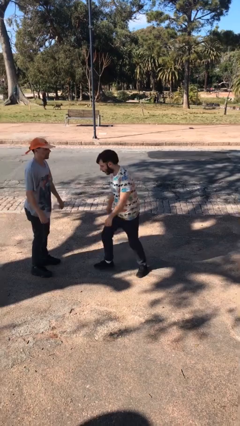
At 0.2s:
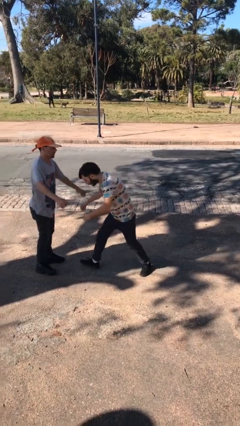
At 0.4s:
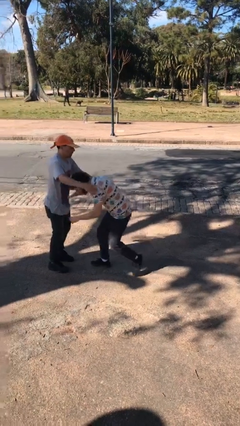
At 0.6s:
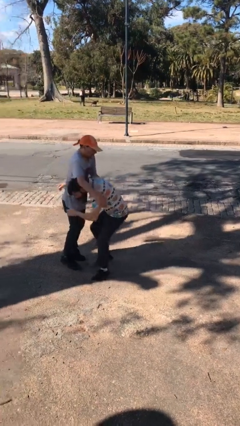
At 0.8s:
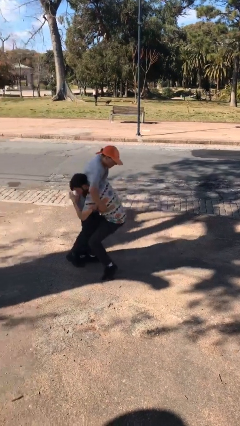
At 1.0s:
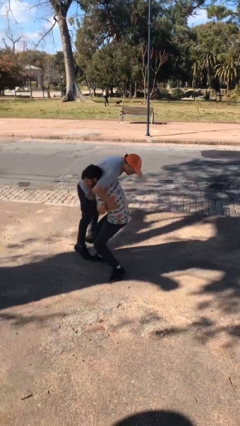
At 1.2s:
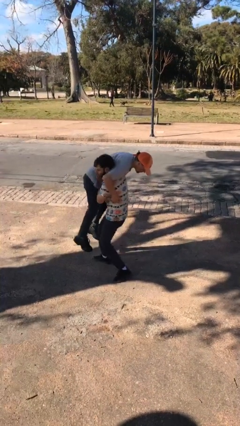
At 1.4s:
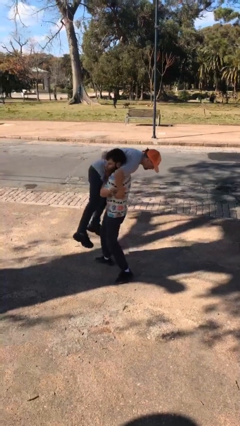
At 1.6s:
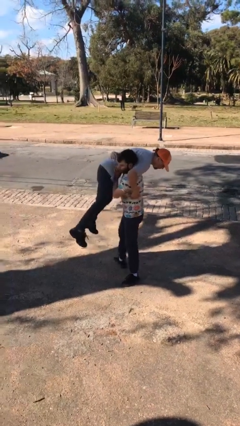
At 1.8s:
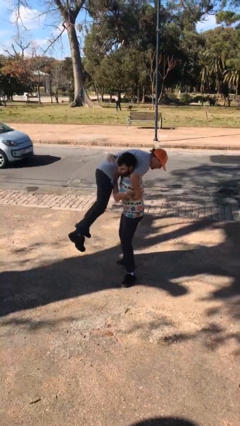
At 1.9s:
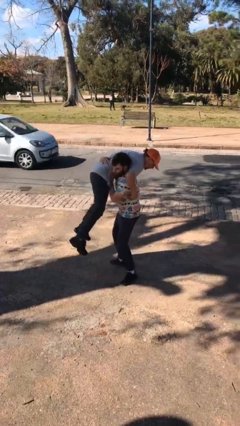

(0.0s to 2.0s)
person carries person over shoulder

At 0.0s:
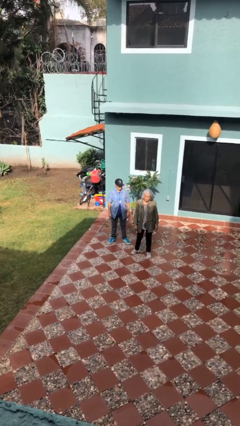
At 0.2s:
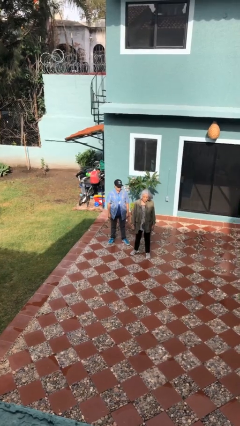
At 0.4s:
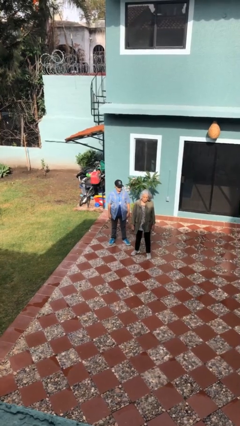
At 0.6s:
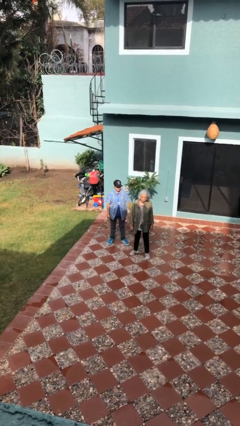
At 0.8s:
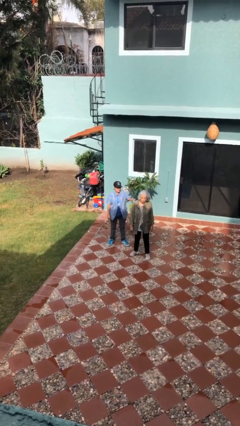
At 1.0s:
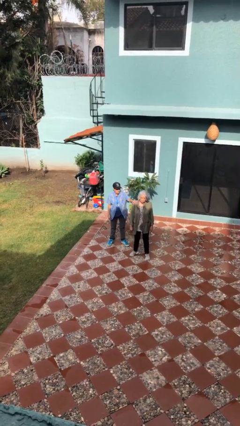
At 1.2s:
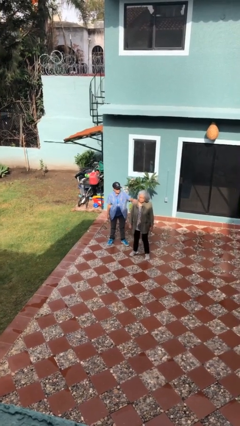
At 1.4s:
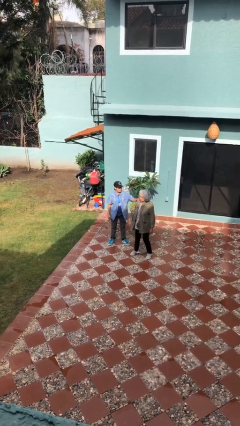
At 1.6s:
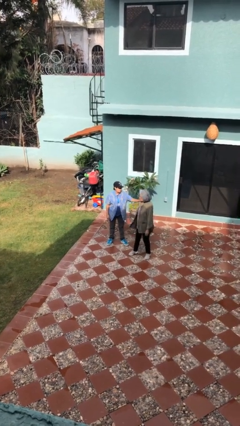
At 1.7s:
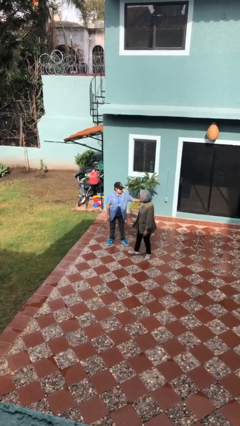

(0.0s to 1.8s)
person grabs person by shoulder

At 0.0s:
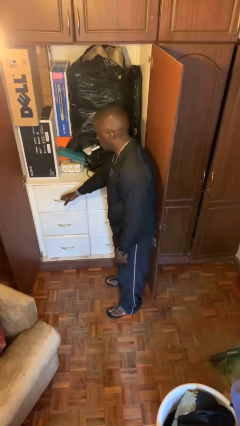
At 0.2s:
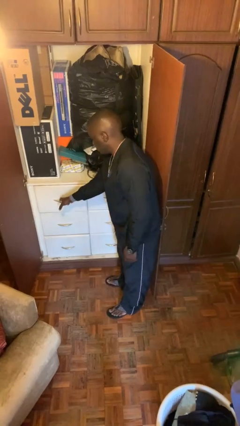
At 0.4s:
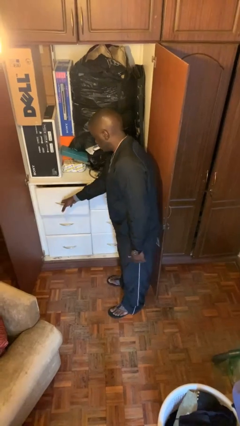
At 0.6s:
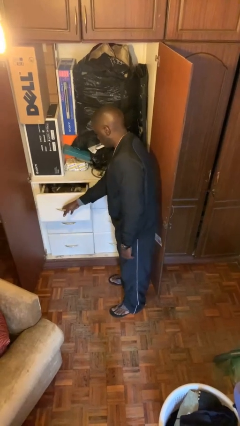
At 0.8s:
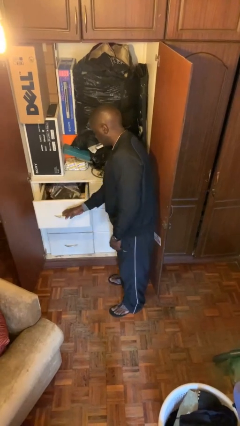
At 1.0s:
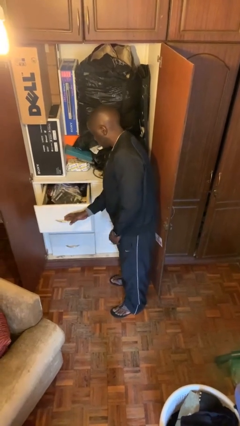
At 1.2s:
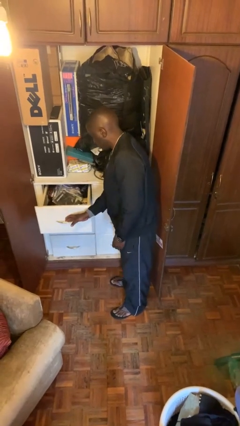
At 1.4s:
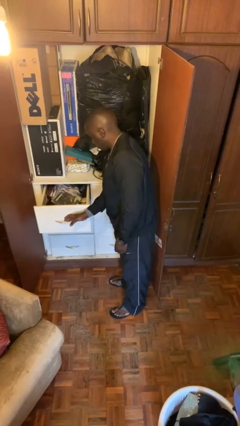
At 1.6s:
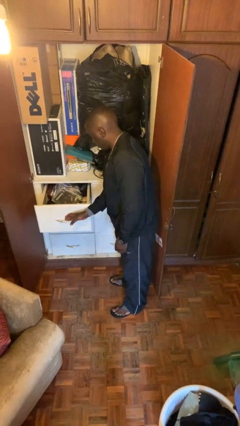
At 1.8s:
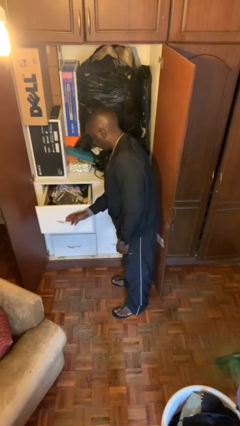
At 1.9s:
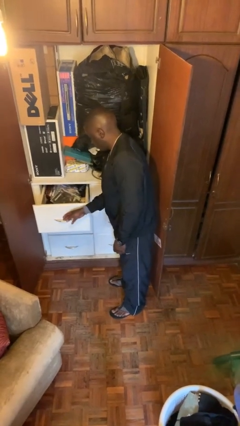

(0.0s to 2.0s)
person opens dresser drawer

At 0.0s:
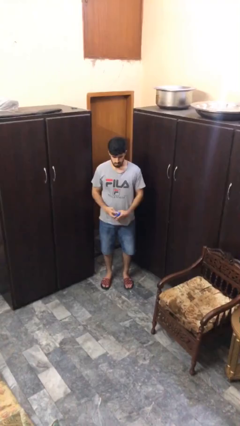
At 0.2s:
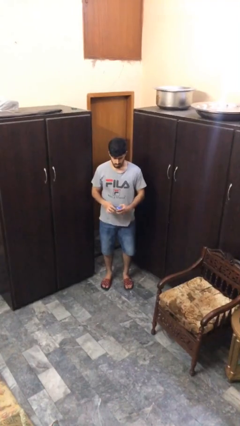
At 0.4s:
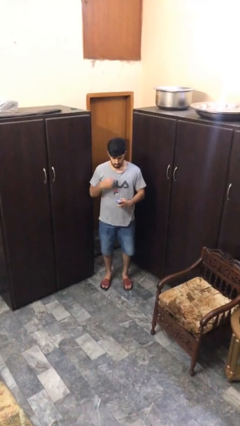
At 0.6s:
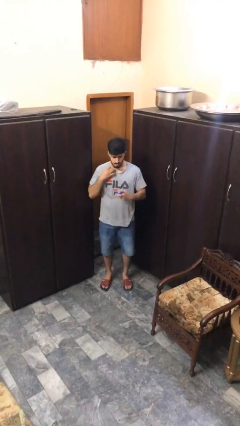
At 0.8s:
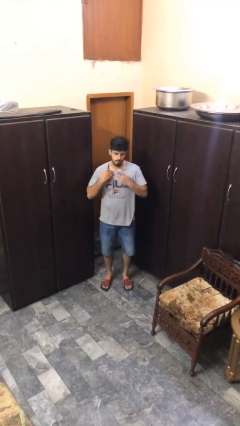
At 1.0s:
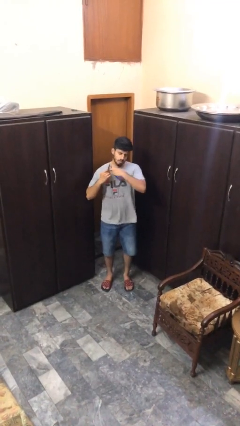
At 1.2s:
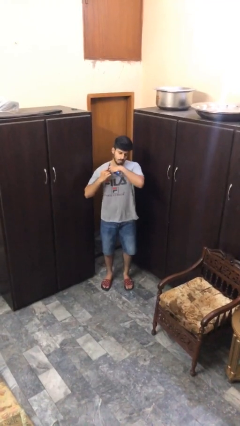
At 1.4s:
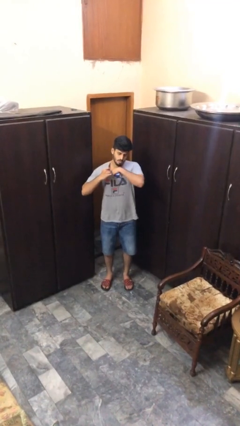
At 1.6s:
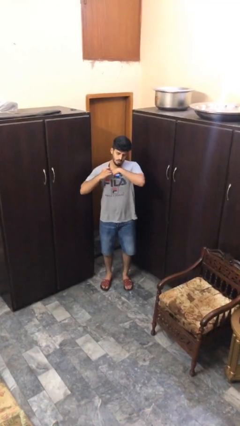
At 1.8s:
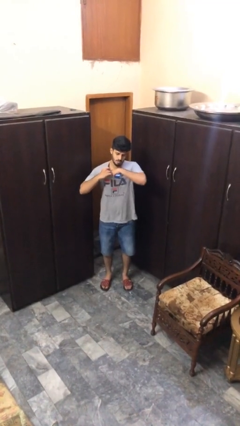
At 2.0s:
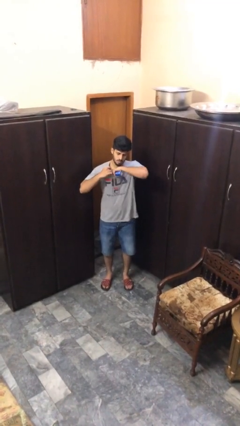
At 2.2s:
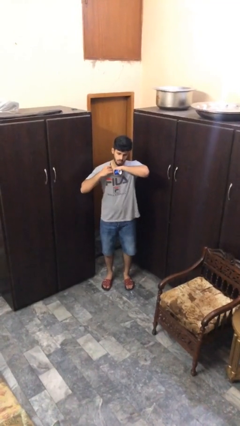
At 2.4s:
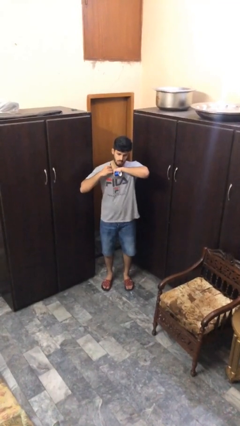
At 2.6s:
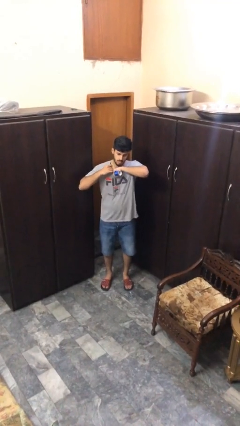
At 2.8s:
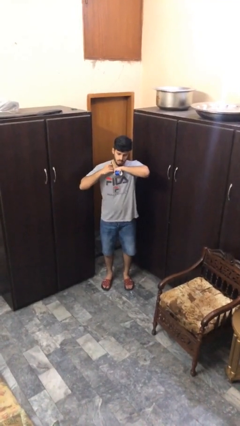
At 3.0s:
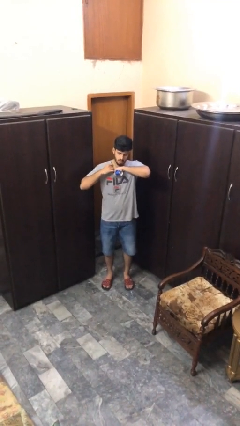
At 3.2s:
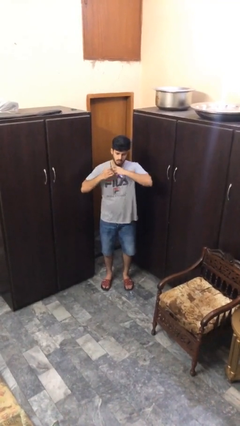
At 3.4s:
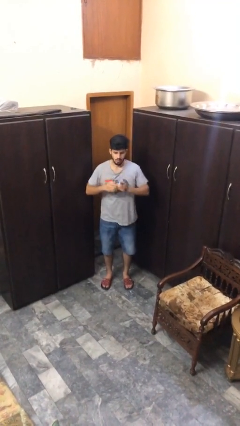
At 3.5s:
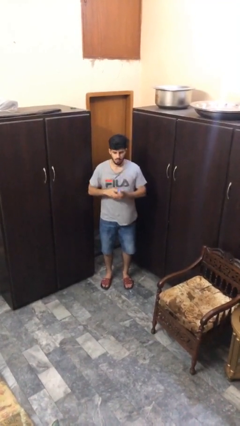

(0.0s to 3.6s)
person applies deodorant

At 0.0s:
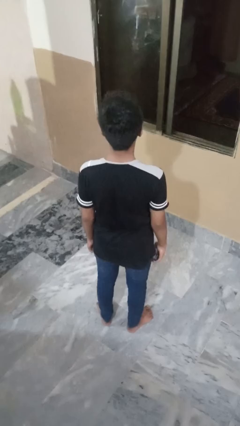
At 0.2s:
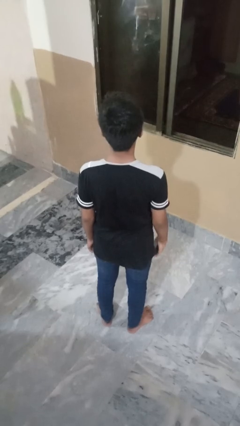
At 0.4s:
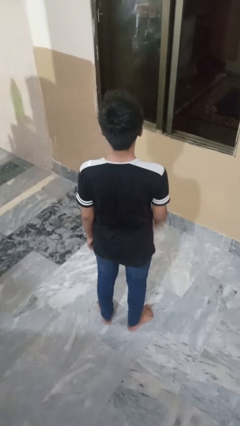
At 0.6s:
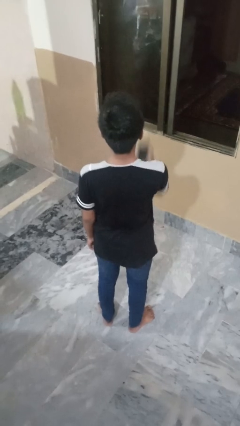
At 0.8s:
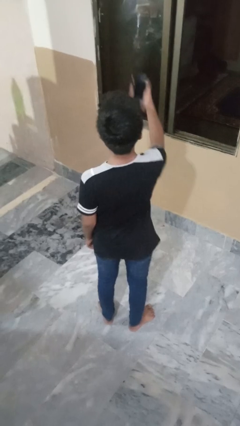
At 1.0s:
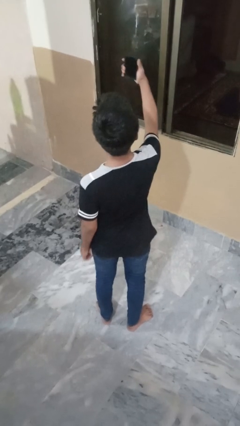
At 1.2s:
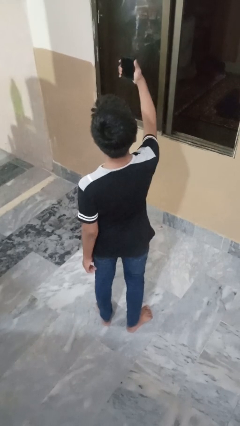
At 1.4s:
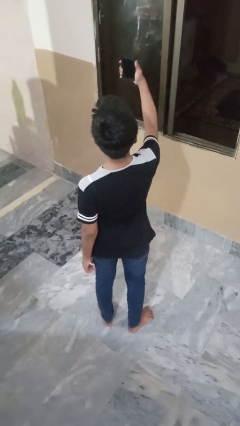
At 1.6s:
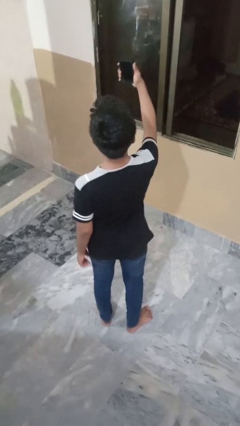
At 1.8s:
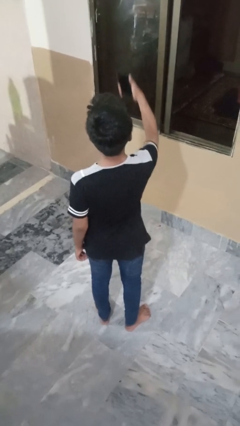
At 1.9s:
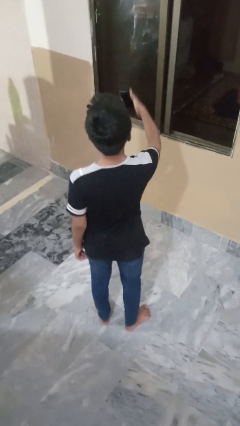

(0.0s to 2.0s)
person takes selfie

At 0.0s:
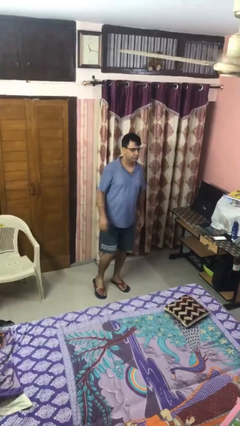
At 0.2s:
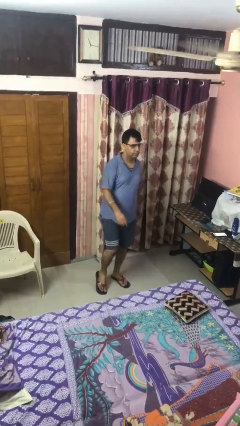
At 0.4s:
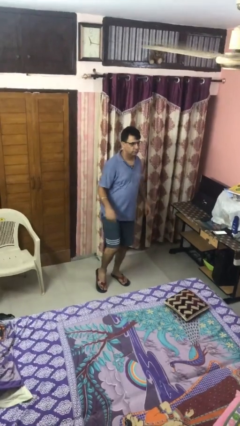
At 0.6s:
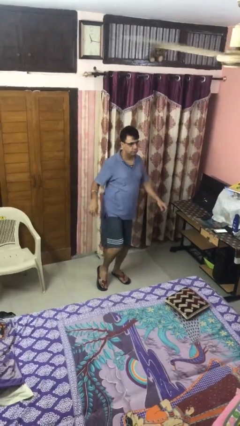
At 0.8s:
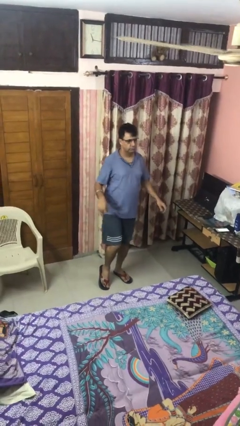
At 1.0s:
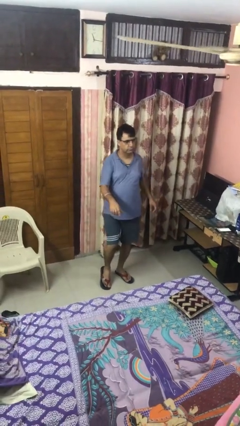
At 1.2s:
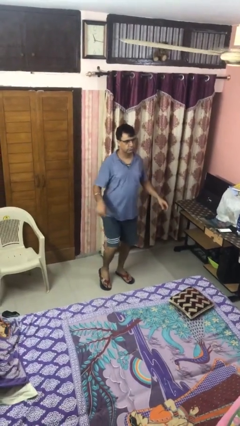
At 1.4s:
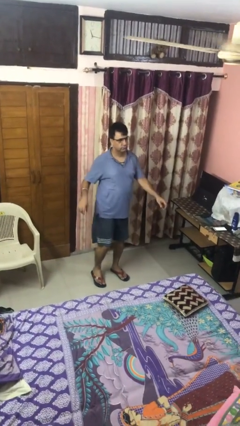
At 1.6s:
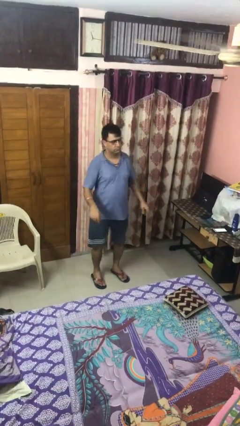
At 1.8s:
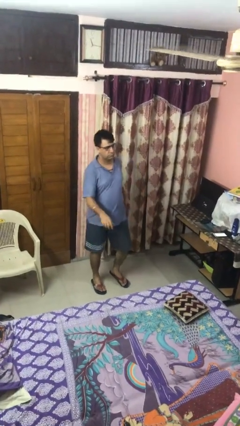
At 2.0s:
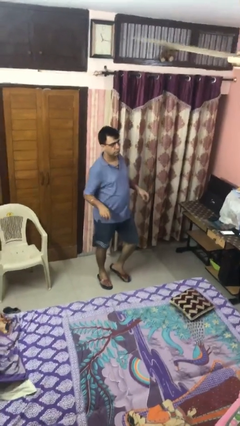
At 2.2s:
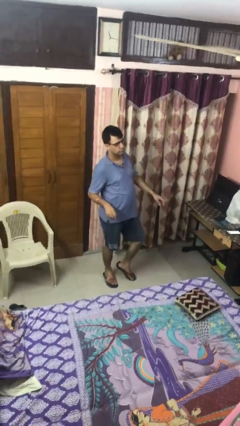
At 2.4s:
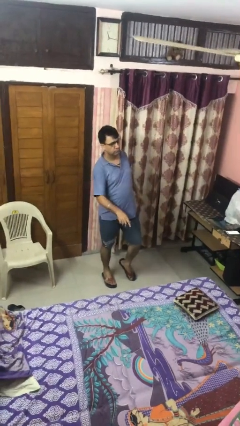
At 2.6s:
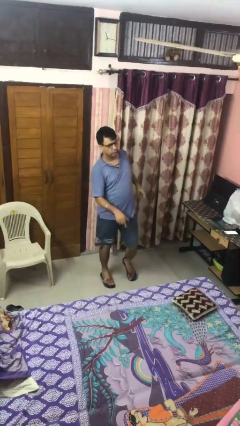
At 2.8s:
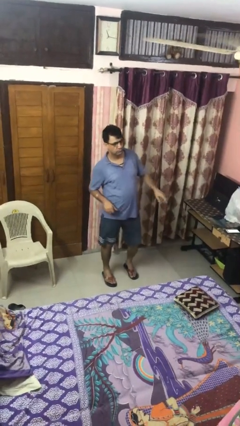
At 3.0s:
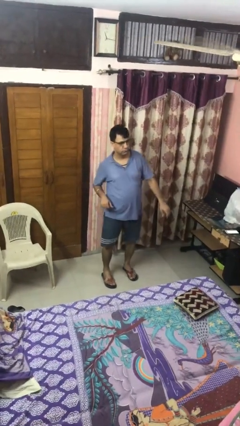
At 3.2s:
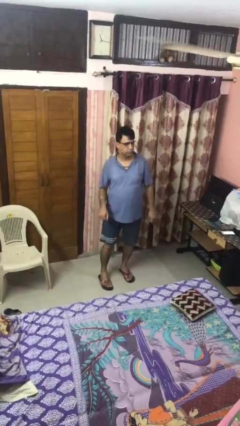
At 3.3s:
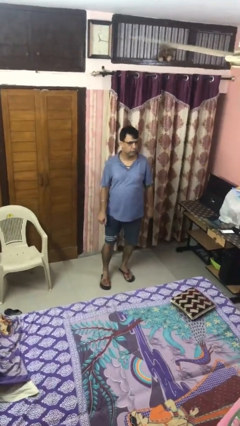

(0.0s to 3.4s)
person dances in place

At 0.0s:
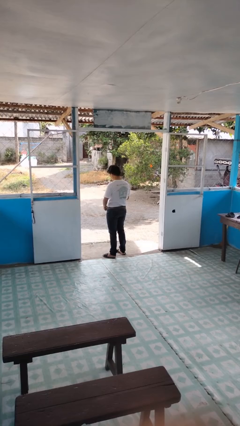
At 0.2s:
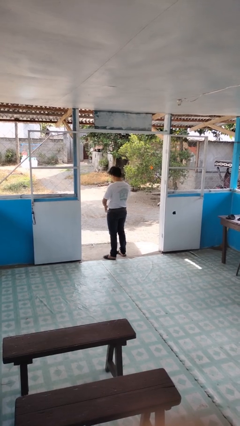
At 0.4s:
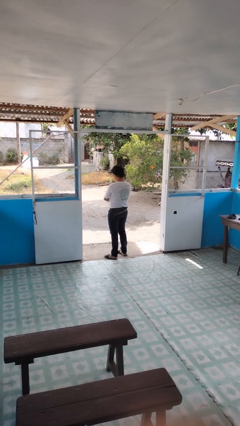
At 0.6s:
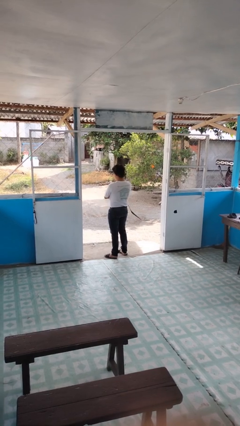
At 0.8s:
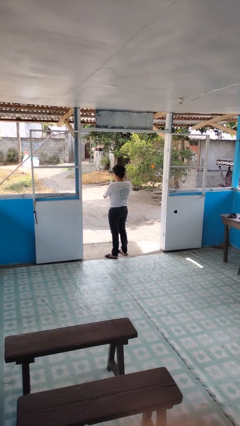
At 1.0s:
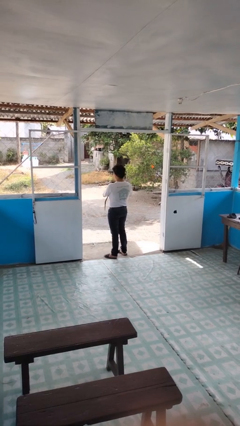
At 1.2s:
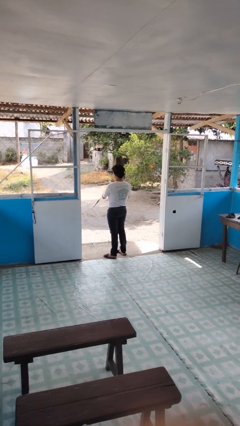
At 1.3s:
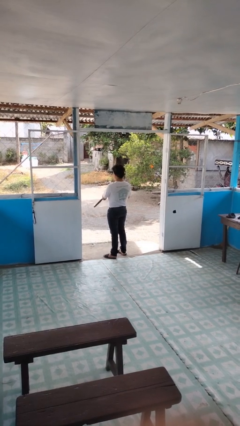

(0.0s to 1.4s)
person takes off belt

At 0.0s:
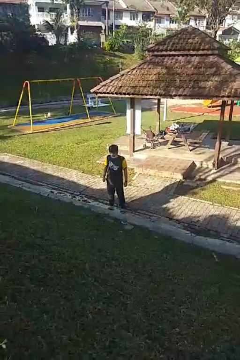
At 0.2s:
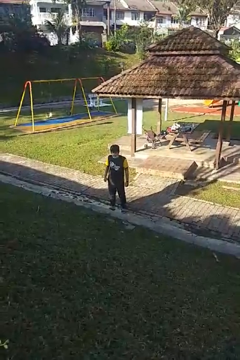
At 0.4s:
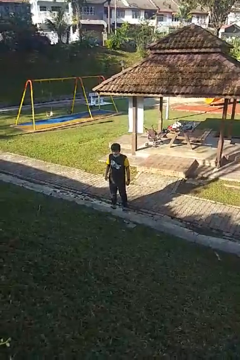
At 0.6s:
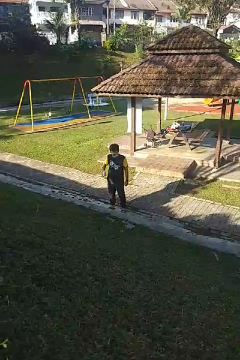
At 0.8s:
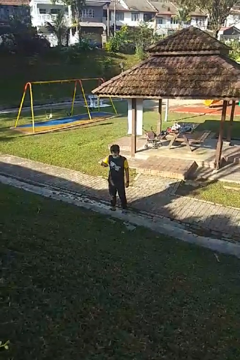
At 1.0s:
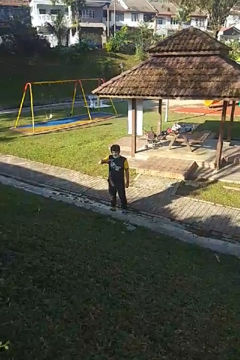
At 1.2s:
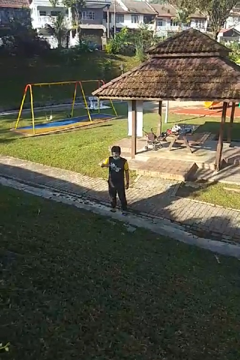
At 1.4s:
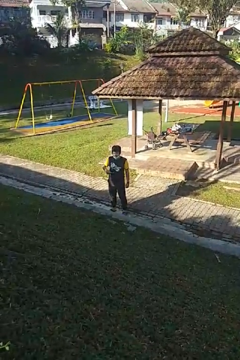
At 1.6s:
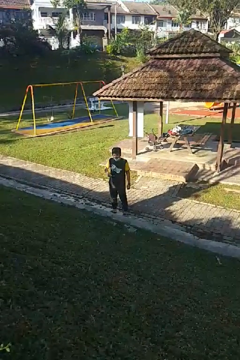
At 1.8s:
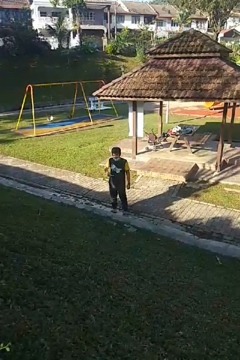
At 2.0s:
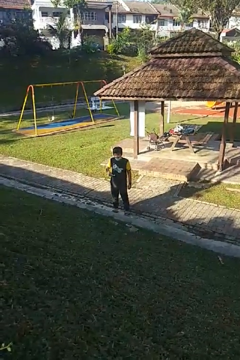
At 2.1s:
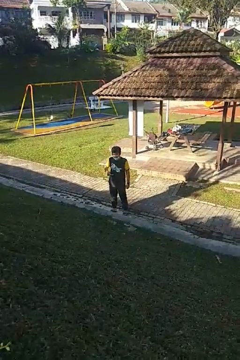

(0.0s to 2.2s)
person brushes teeth
